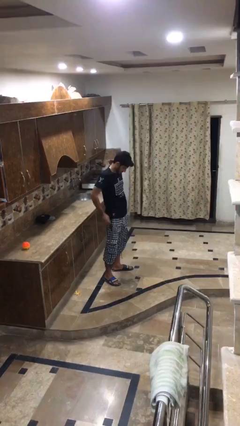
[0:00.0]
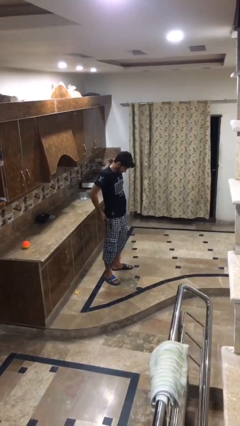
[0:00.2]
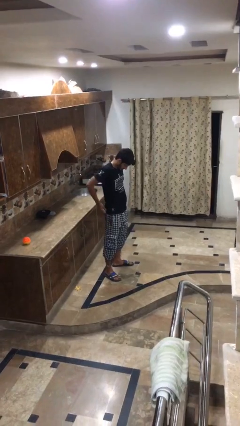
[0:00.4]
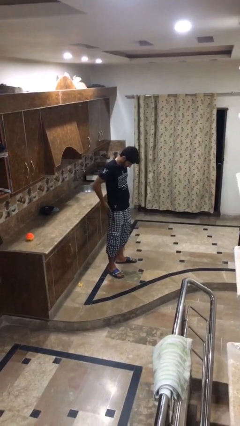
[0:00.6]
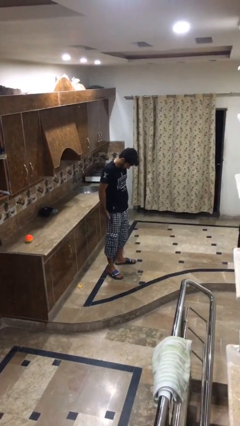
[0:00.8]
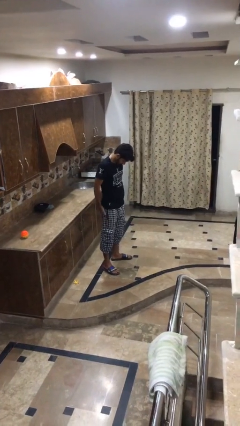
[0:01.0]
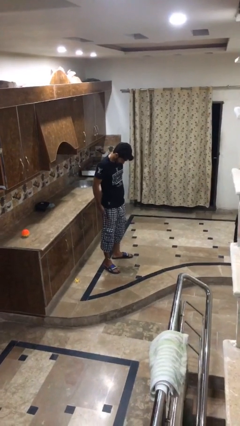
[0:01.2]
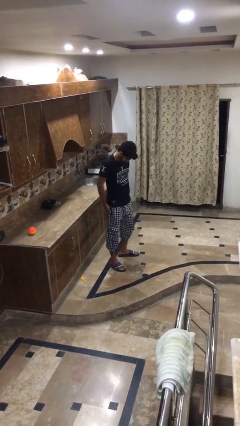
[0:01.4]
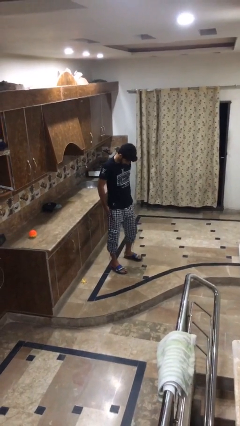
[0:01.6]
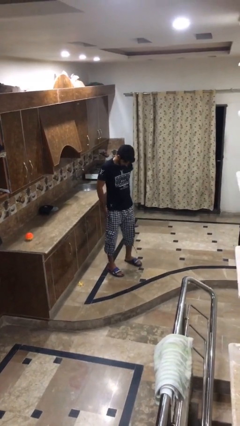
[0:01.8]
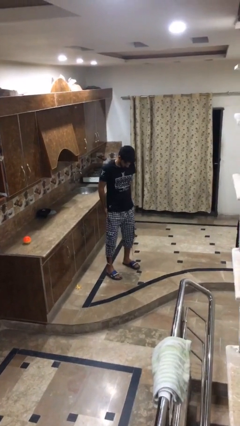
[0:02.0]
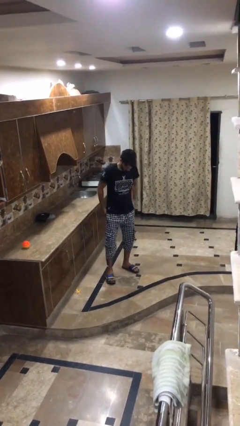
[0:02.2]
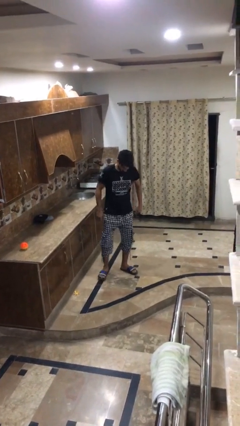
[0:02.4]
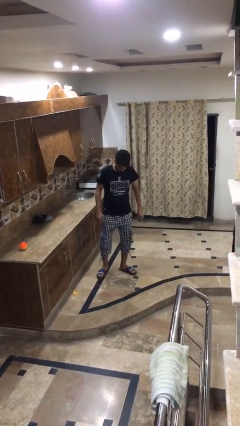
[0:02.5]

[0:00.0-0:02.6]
person puts hands in back pockets

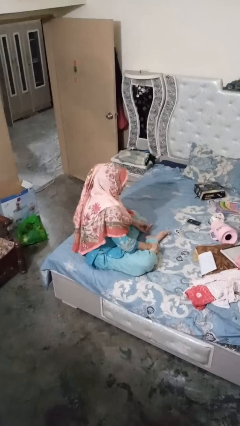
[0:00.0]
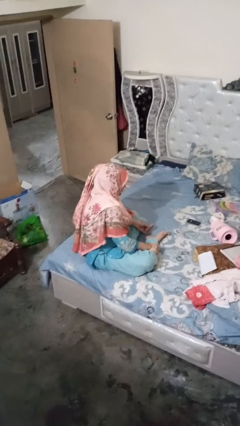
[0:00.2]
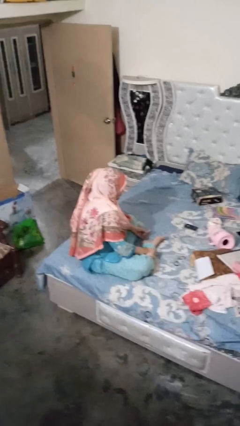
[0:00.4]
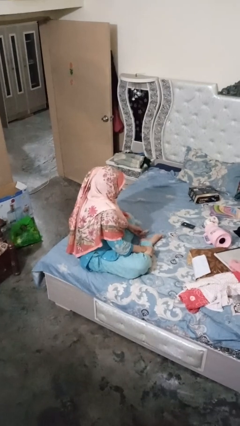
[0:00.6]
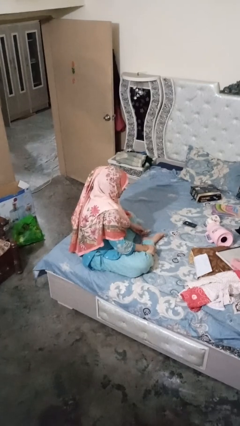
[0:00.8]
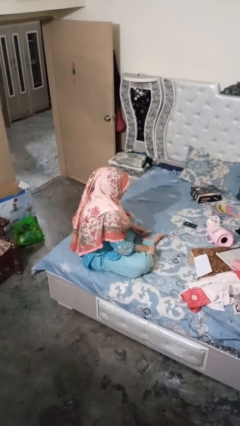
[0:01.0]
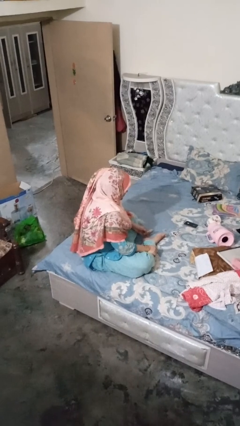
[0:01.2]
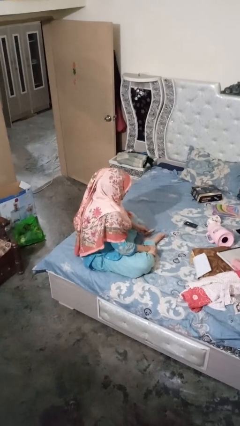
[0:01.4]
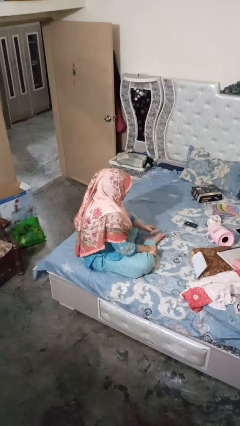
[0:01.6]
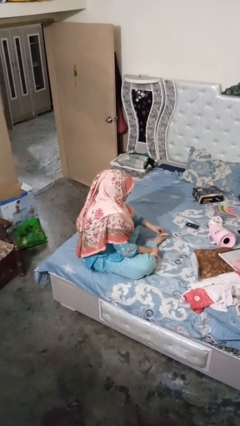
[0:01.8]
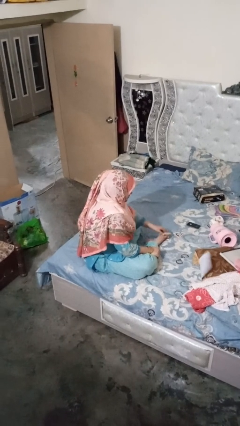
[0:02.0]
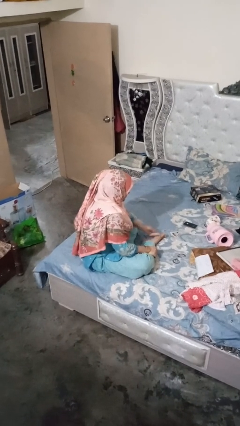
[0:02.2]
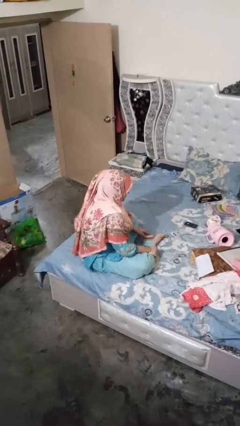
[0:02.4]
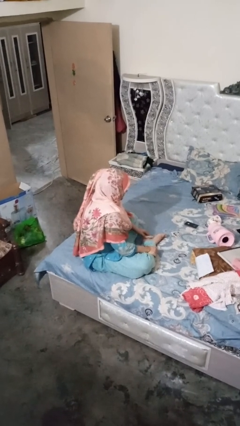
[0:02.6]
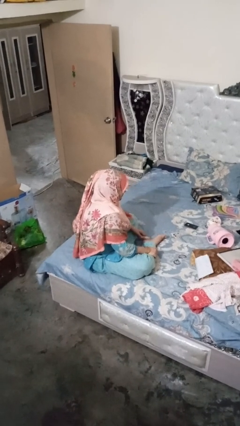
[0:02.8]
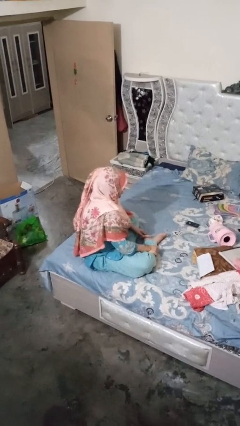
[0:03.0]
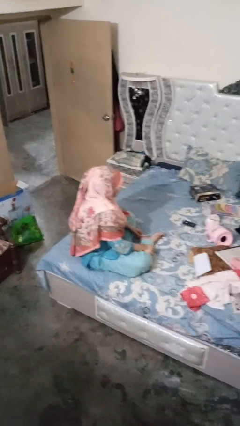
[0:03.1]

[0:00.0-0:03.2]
person rubs foot

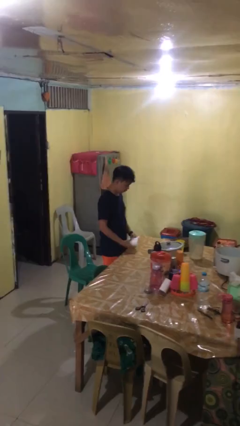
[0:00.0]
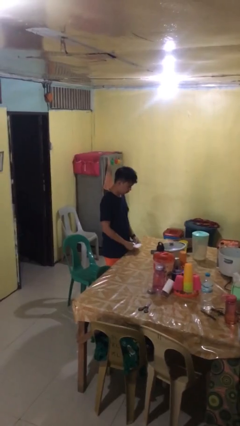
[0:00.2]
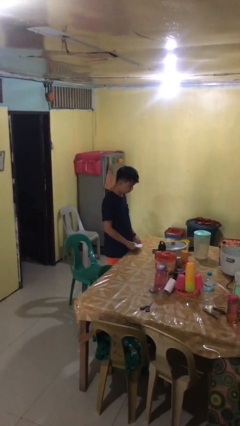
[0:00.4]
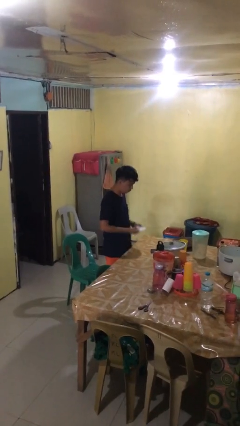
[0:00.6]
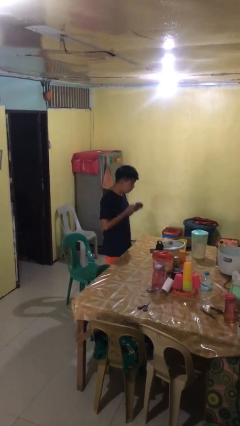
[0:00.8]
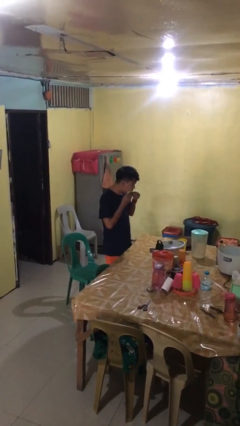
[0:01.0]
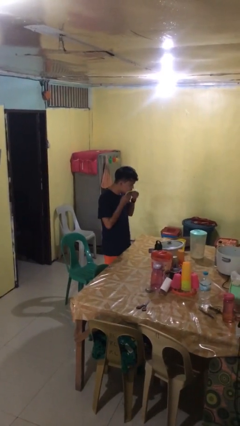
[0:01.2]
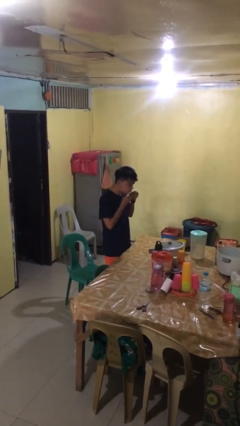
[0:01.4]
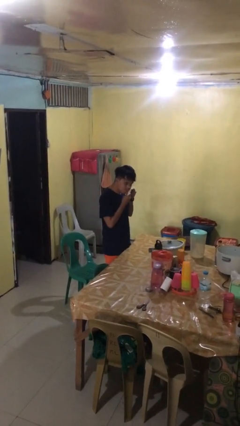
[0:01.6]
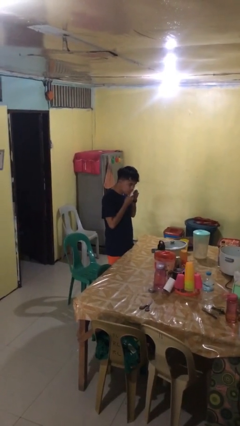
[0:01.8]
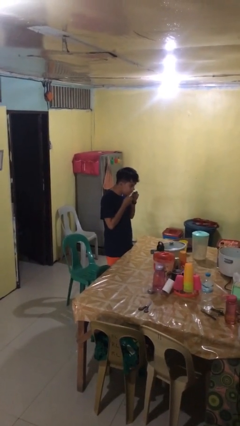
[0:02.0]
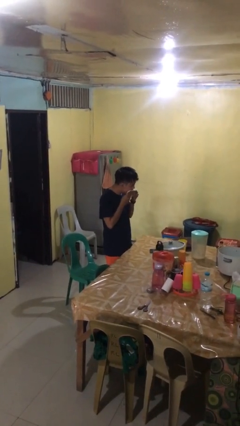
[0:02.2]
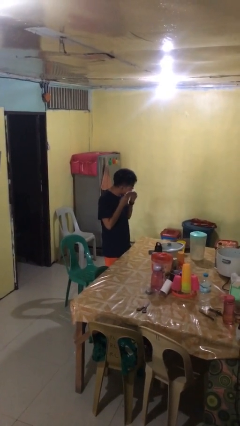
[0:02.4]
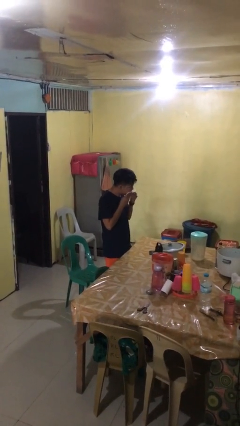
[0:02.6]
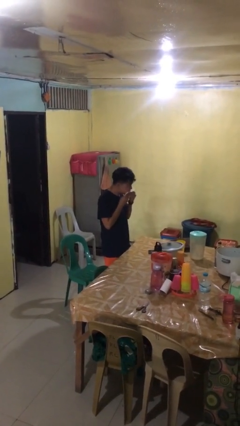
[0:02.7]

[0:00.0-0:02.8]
person wipes mouth with napkin

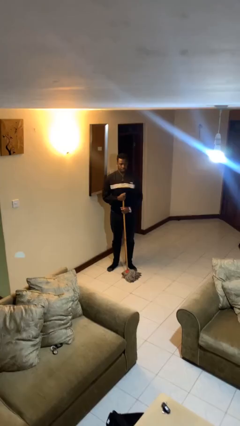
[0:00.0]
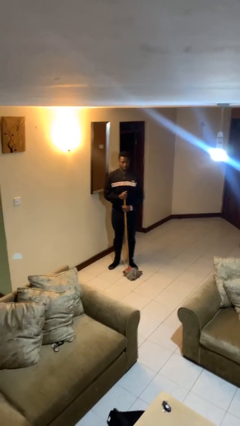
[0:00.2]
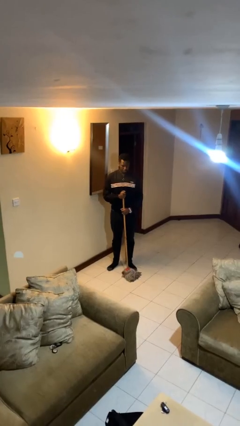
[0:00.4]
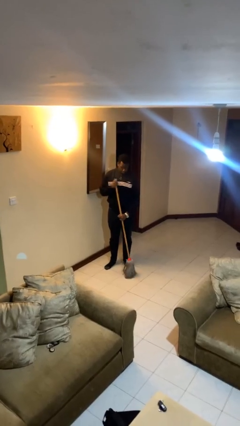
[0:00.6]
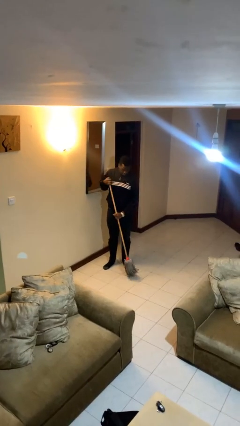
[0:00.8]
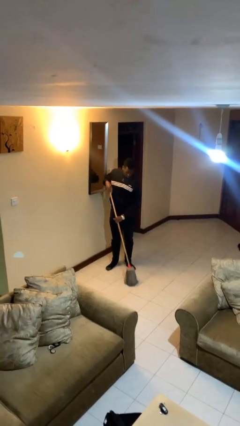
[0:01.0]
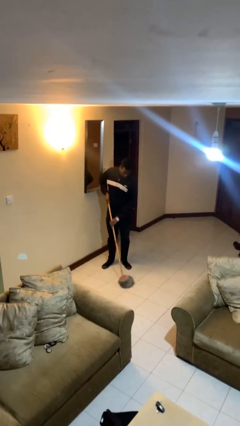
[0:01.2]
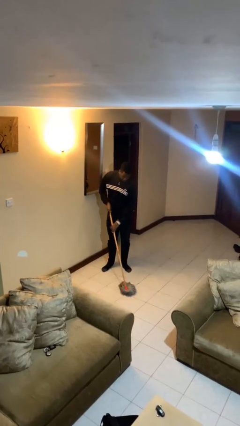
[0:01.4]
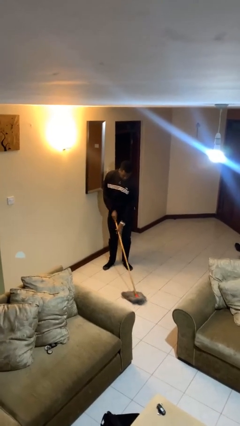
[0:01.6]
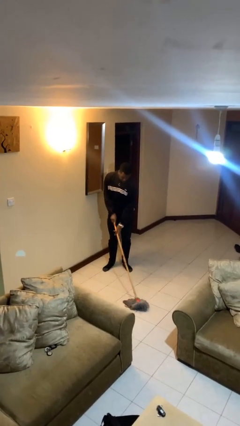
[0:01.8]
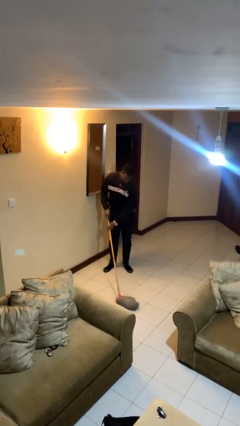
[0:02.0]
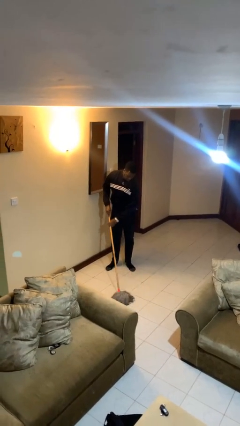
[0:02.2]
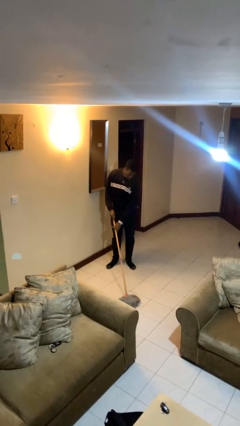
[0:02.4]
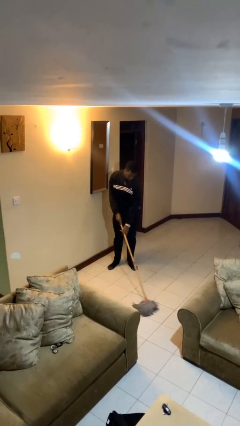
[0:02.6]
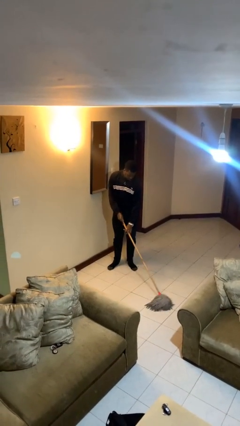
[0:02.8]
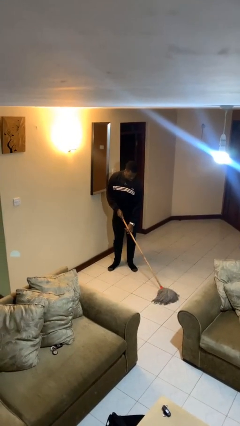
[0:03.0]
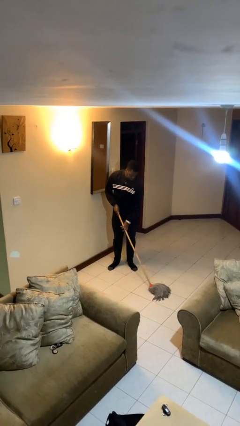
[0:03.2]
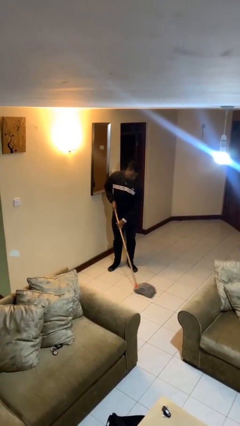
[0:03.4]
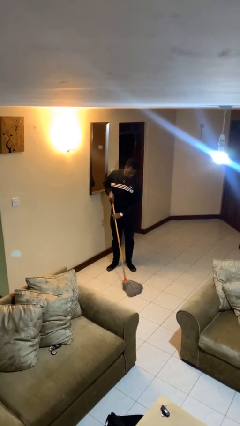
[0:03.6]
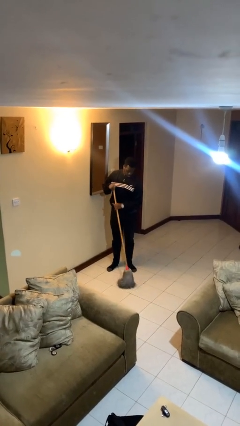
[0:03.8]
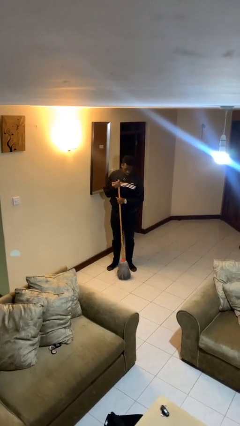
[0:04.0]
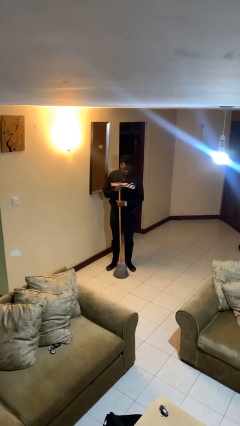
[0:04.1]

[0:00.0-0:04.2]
person mops

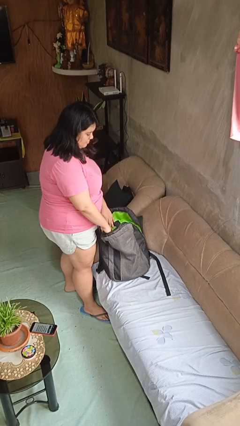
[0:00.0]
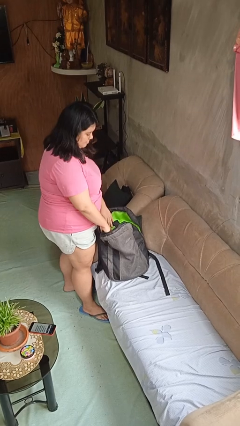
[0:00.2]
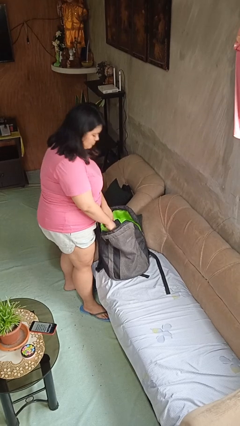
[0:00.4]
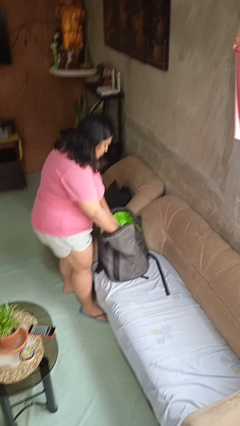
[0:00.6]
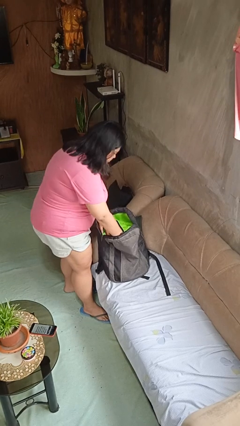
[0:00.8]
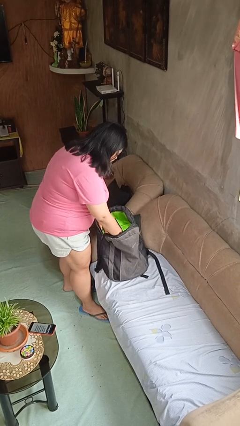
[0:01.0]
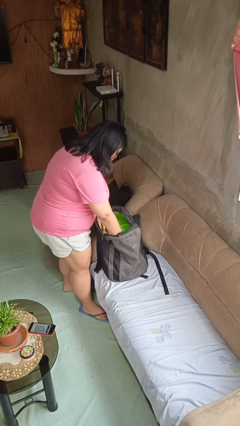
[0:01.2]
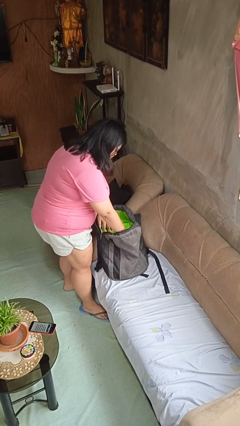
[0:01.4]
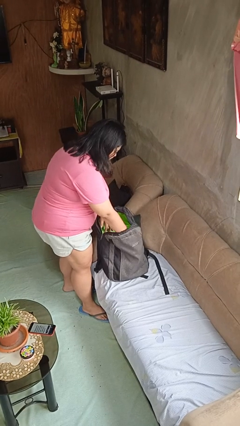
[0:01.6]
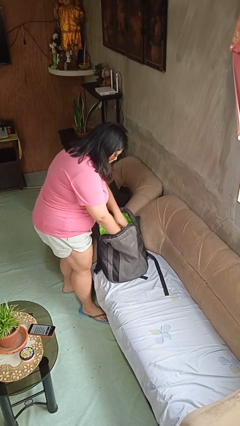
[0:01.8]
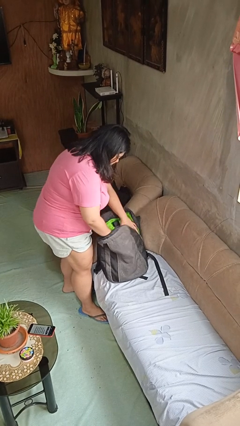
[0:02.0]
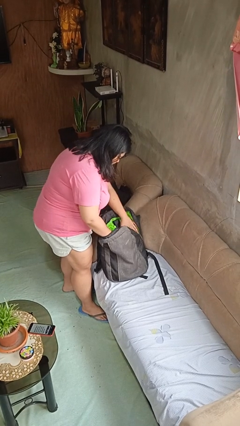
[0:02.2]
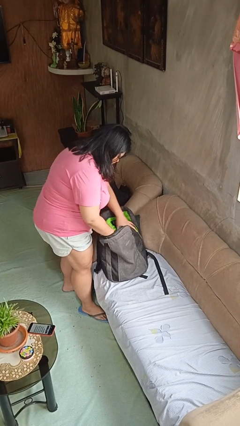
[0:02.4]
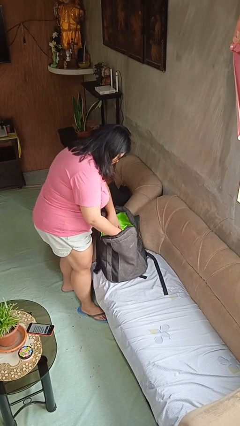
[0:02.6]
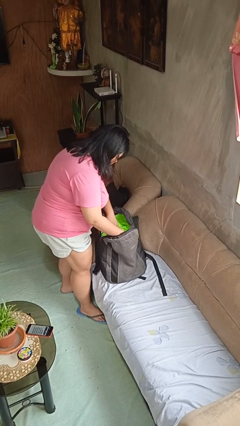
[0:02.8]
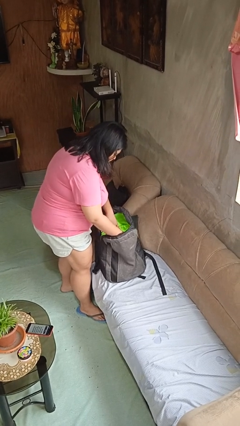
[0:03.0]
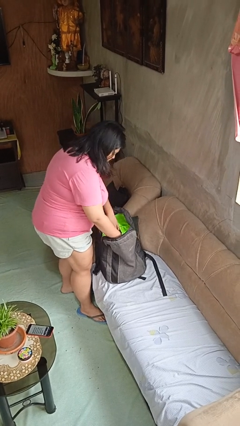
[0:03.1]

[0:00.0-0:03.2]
person searches in backpack

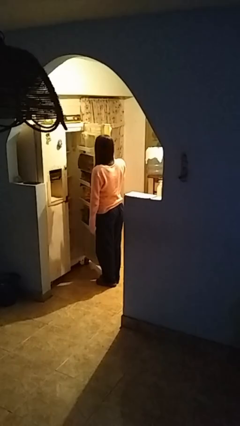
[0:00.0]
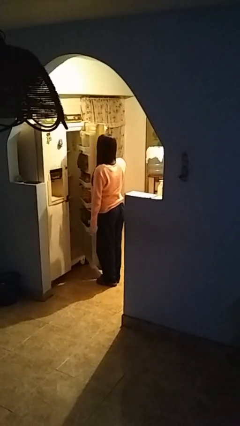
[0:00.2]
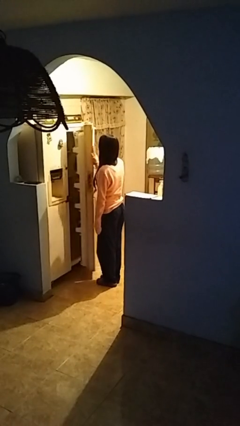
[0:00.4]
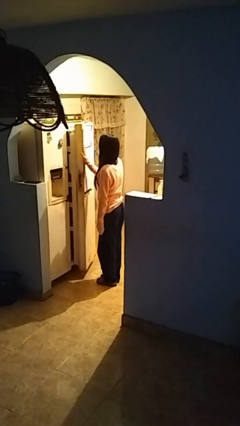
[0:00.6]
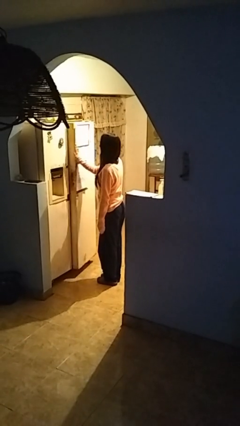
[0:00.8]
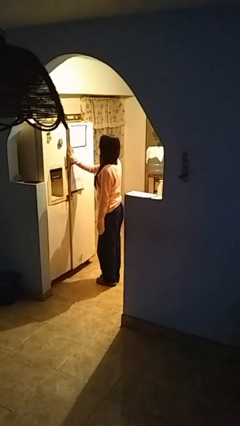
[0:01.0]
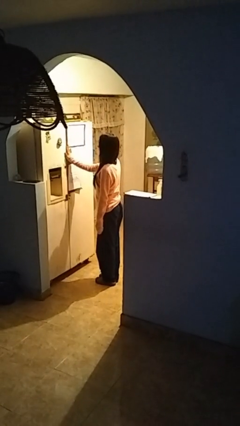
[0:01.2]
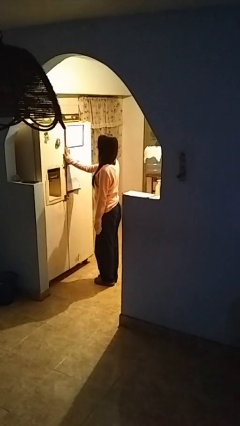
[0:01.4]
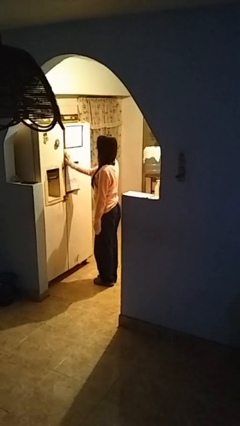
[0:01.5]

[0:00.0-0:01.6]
person closes refrigerator
